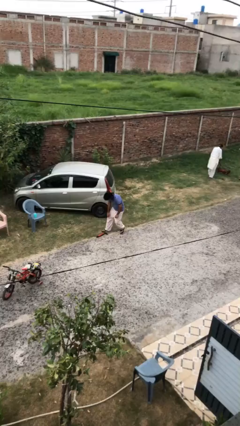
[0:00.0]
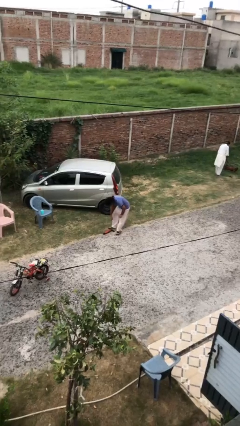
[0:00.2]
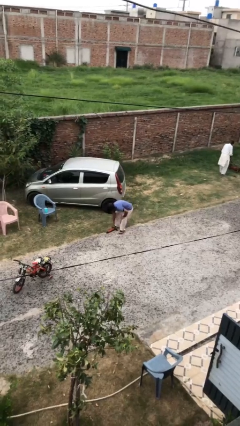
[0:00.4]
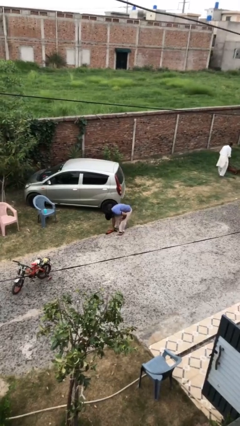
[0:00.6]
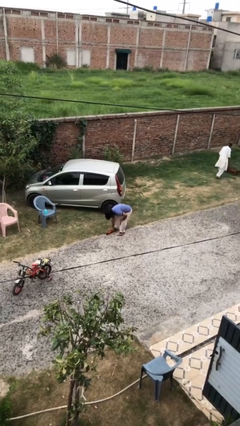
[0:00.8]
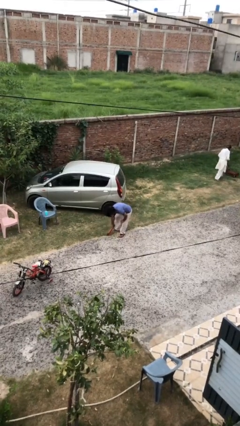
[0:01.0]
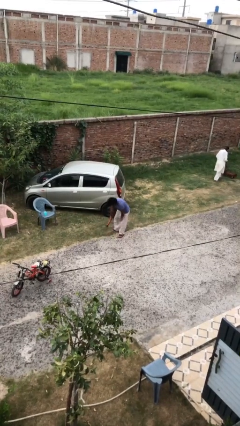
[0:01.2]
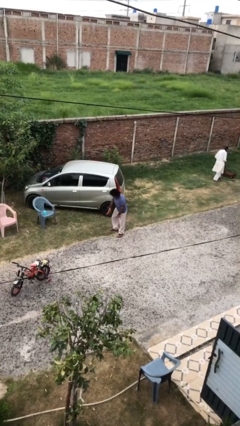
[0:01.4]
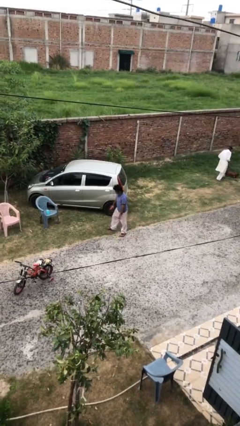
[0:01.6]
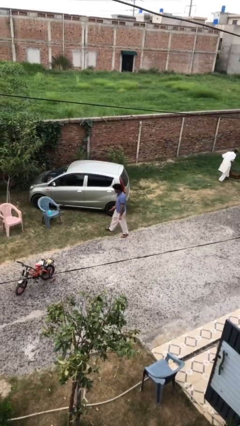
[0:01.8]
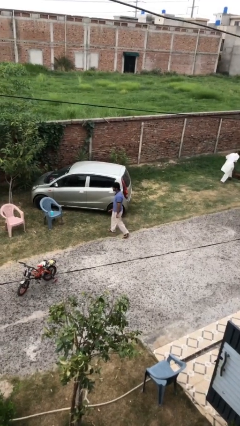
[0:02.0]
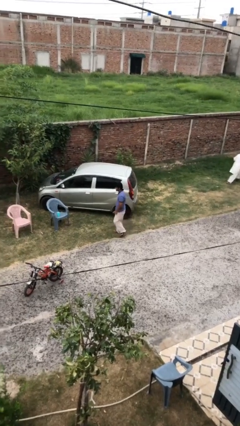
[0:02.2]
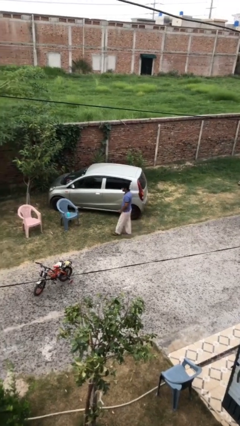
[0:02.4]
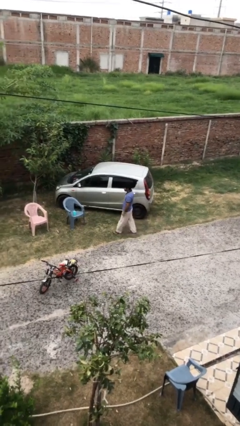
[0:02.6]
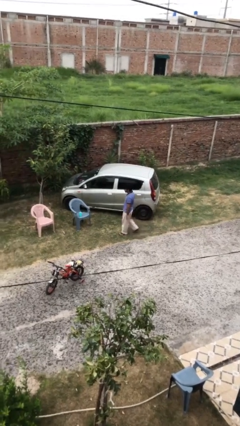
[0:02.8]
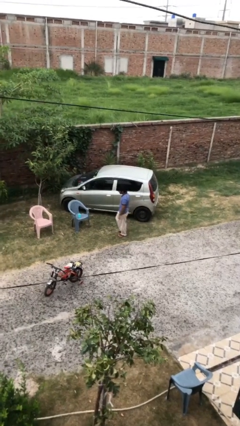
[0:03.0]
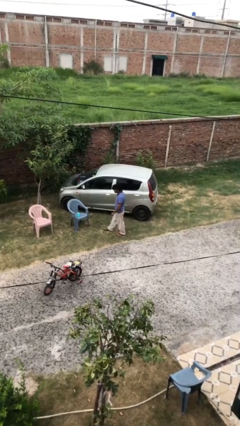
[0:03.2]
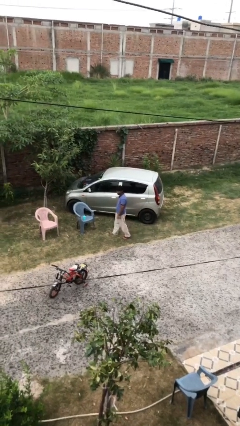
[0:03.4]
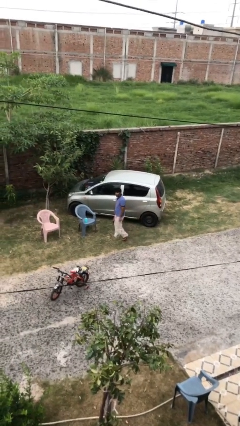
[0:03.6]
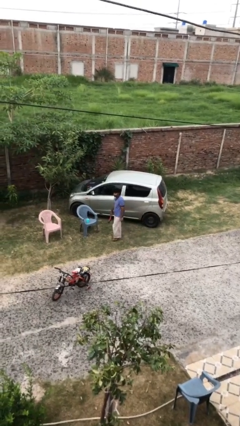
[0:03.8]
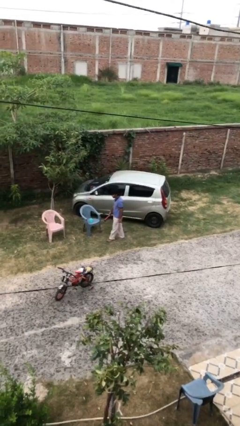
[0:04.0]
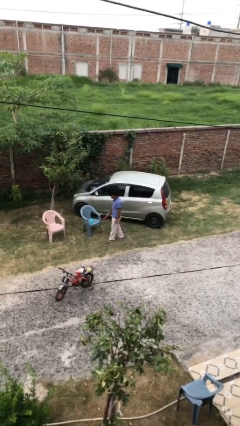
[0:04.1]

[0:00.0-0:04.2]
person picks up object from floor

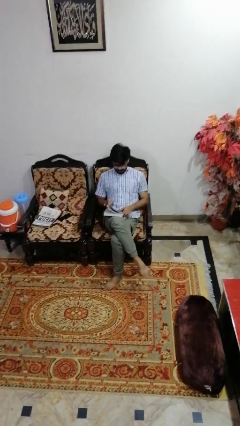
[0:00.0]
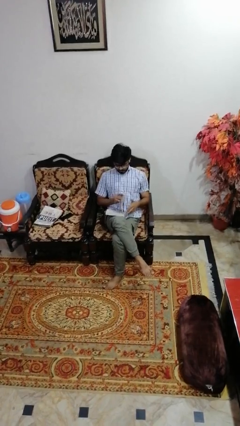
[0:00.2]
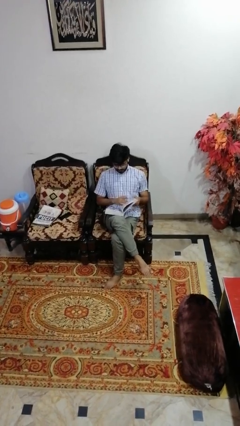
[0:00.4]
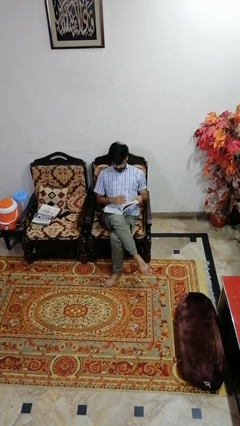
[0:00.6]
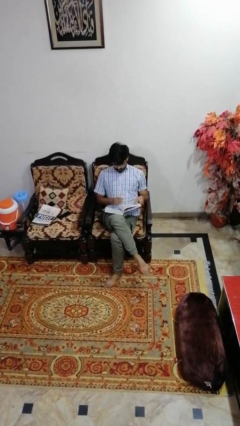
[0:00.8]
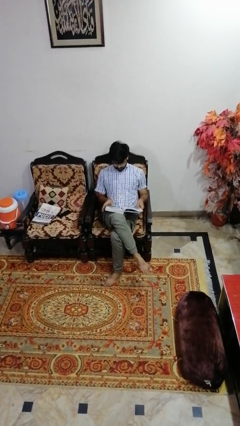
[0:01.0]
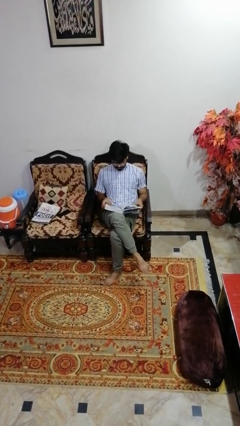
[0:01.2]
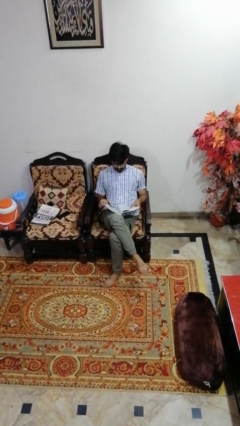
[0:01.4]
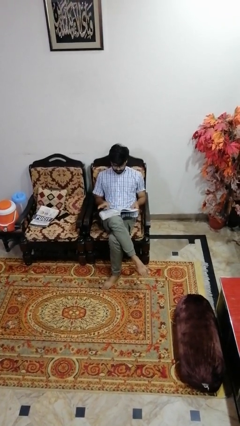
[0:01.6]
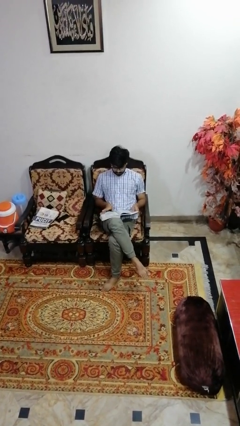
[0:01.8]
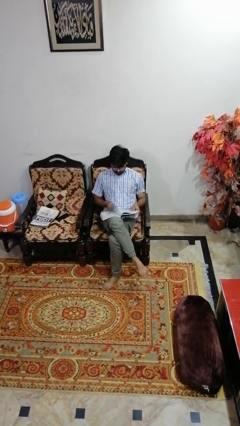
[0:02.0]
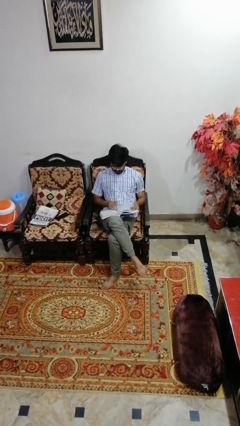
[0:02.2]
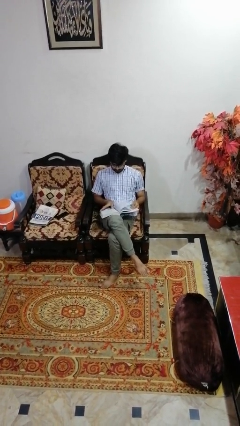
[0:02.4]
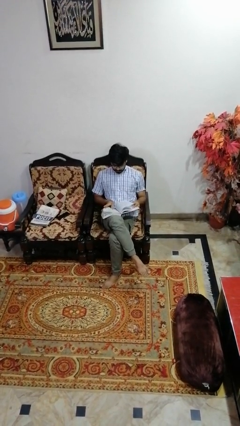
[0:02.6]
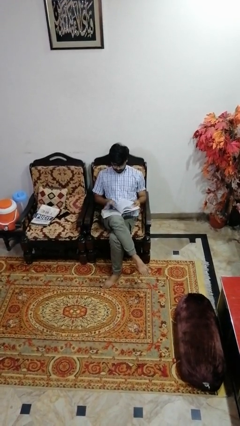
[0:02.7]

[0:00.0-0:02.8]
person looks at wristwatch

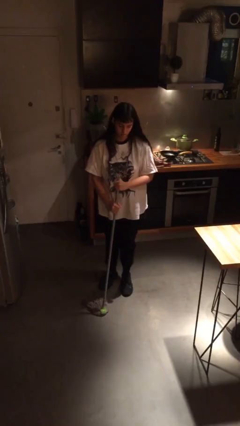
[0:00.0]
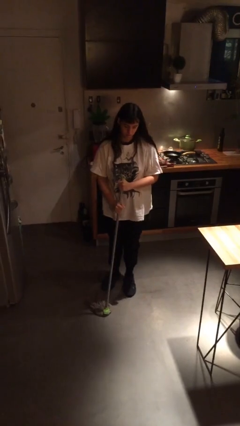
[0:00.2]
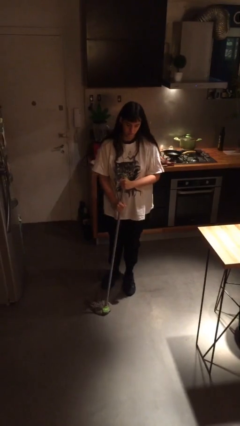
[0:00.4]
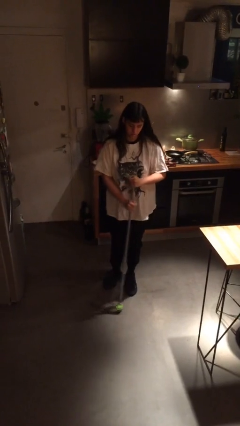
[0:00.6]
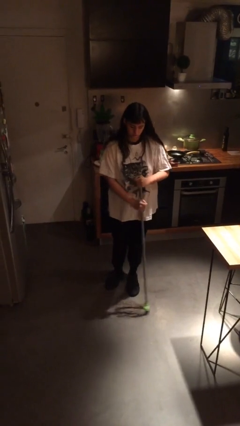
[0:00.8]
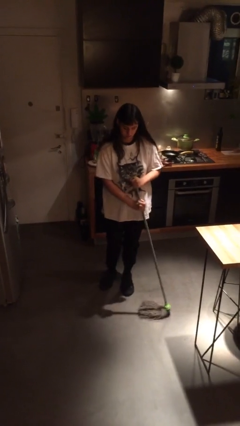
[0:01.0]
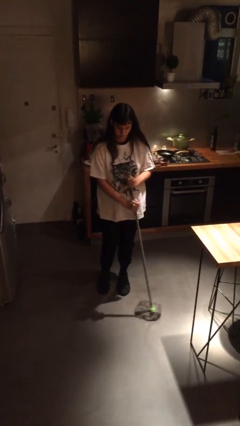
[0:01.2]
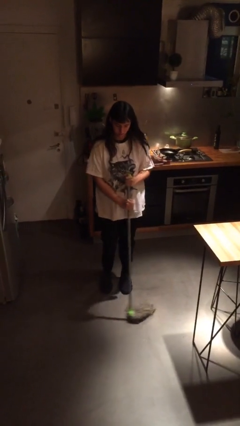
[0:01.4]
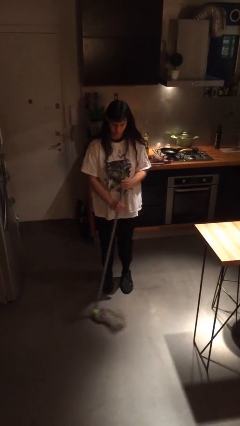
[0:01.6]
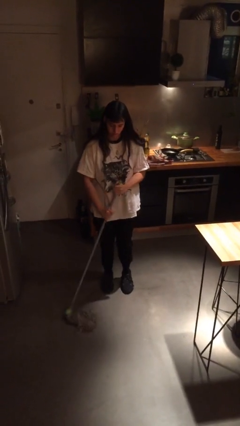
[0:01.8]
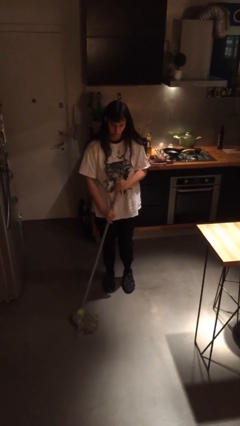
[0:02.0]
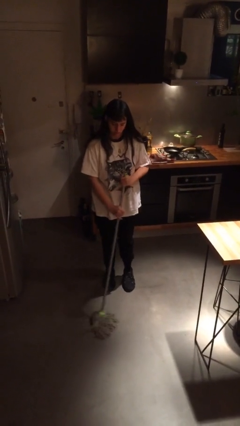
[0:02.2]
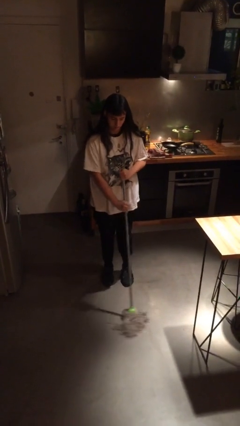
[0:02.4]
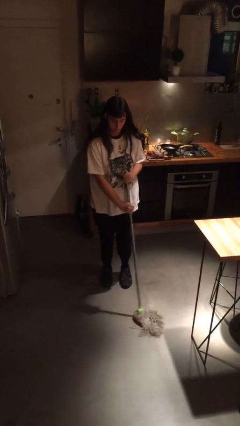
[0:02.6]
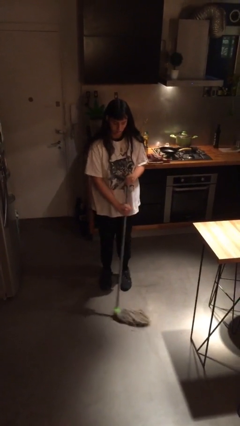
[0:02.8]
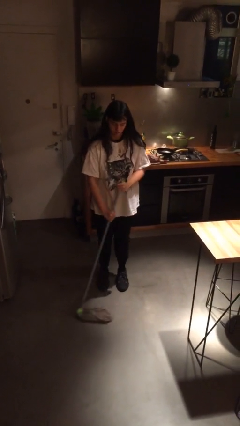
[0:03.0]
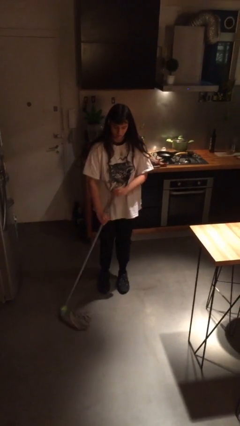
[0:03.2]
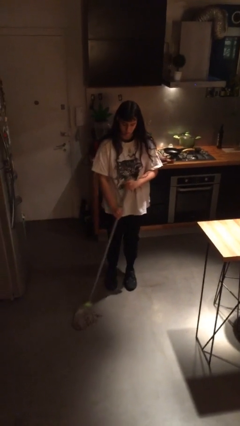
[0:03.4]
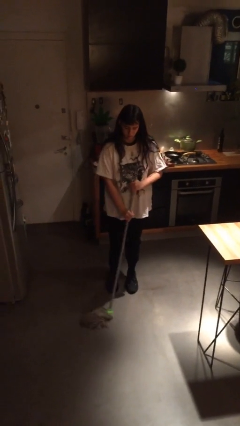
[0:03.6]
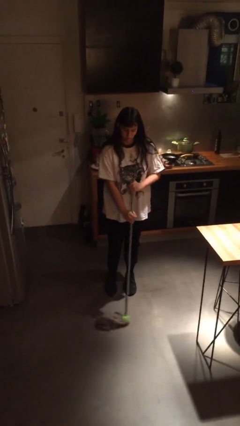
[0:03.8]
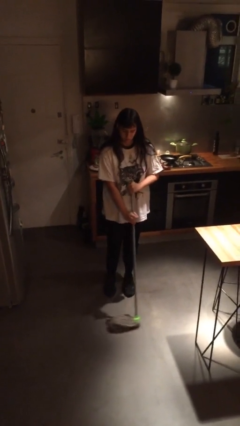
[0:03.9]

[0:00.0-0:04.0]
person mops

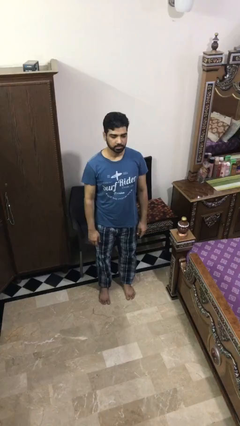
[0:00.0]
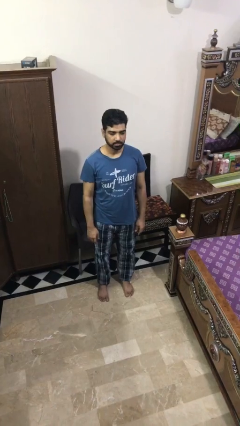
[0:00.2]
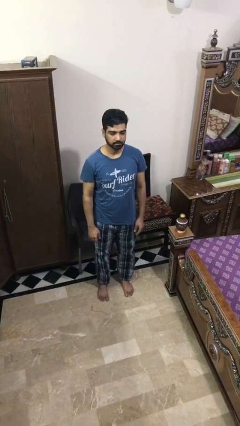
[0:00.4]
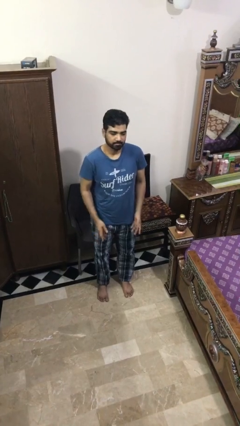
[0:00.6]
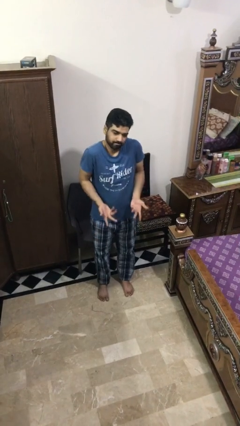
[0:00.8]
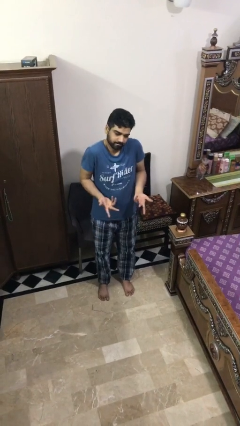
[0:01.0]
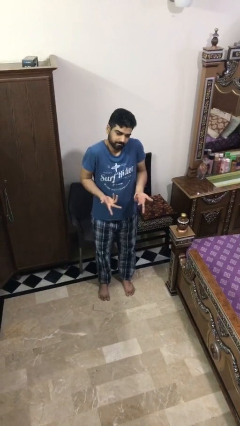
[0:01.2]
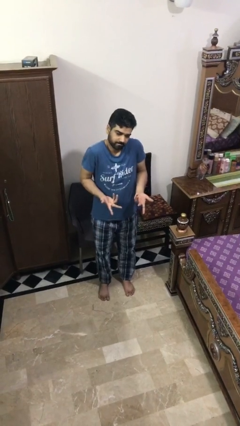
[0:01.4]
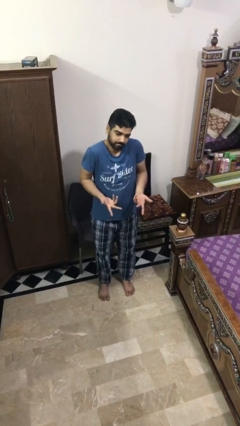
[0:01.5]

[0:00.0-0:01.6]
person shrugs

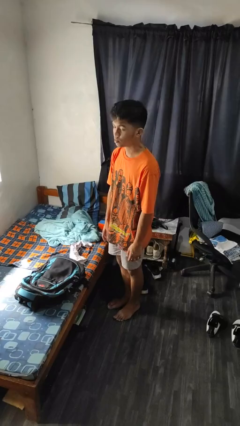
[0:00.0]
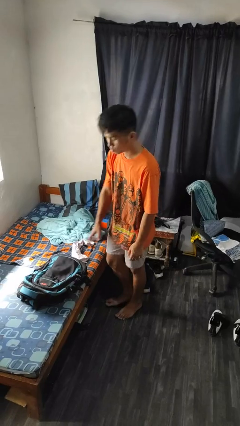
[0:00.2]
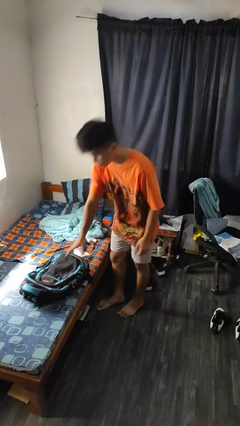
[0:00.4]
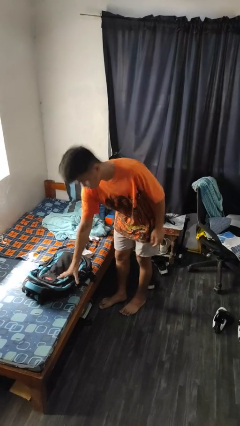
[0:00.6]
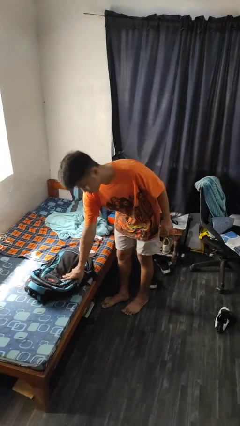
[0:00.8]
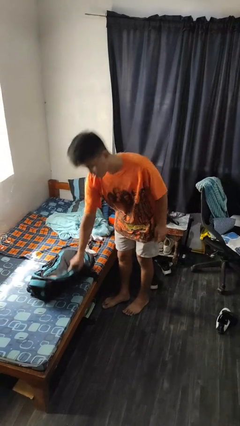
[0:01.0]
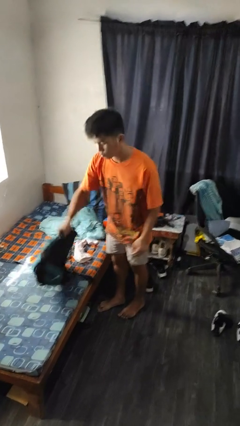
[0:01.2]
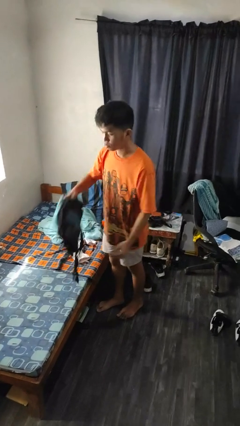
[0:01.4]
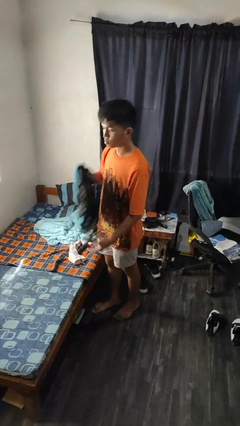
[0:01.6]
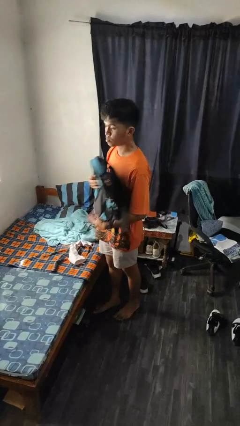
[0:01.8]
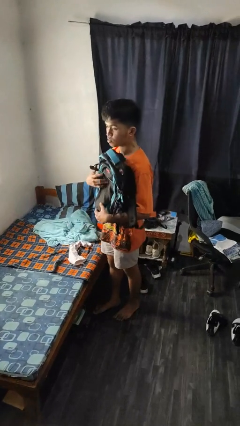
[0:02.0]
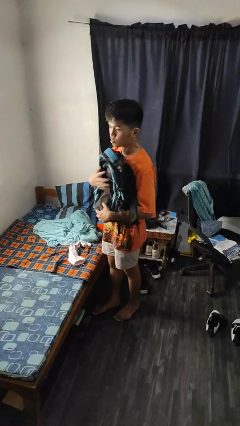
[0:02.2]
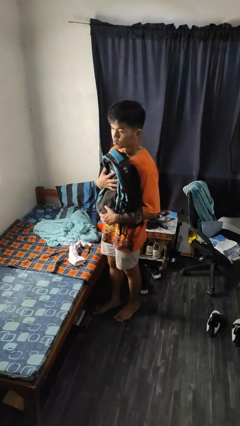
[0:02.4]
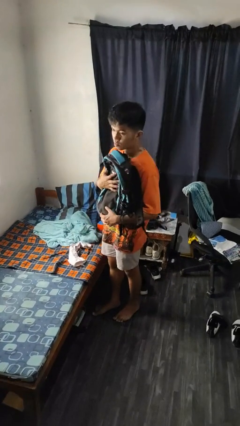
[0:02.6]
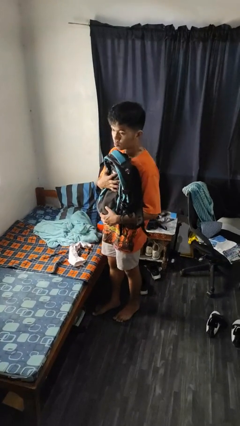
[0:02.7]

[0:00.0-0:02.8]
person picks up object from bed

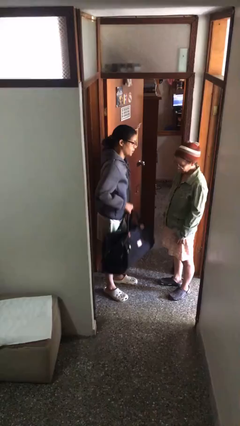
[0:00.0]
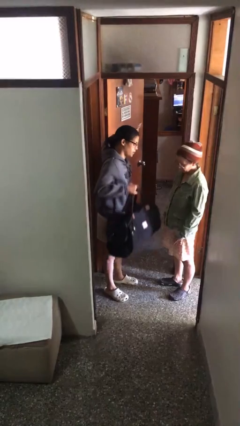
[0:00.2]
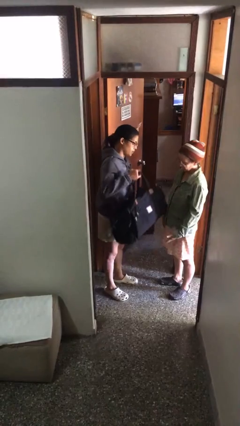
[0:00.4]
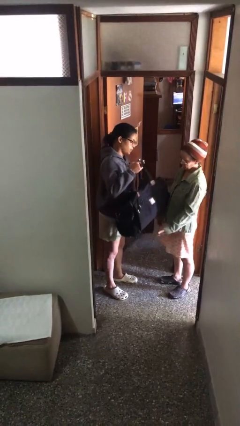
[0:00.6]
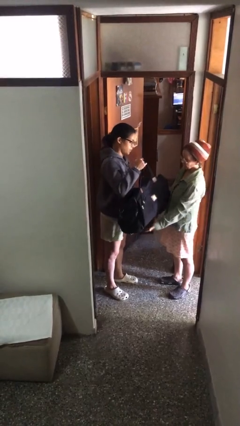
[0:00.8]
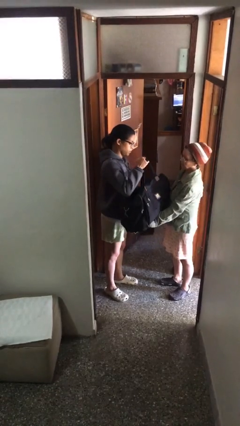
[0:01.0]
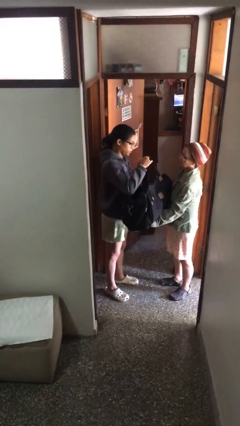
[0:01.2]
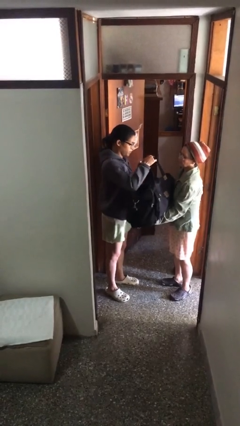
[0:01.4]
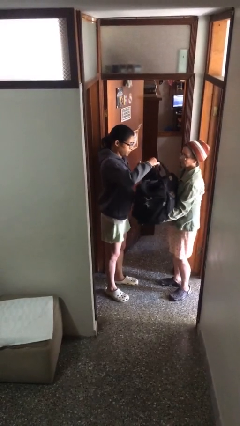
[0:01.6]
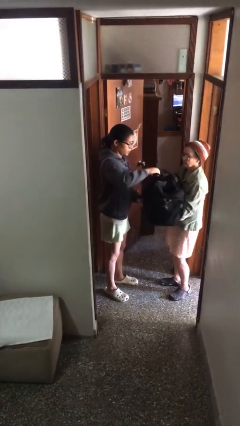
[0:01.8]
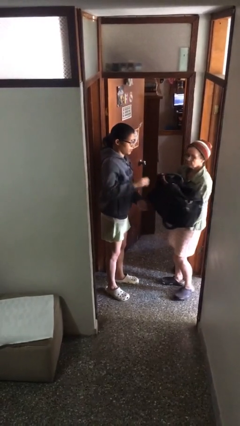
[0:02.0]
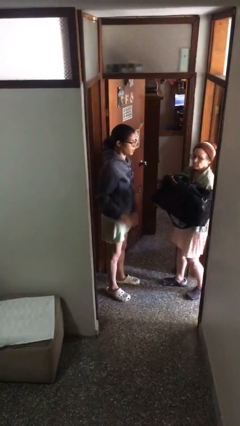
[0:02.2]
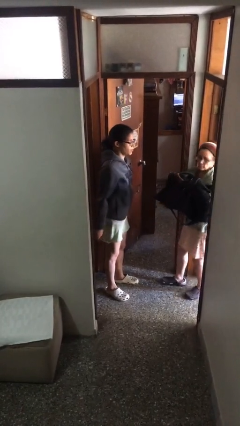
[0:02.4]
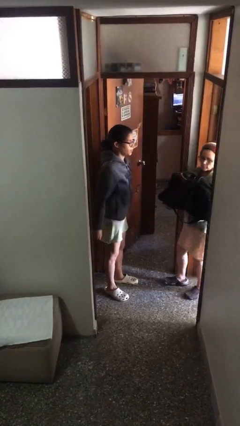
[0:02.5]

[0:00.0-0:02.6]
person transfers object to person
